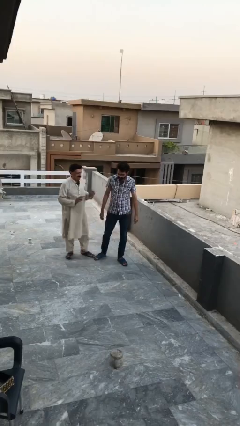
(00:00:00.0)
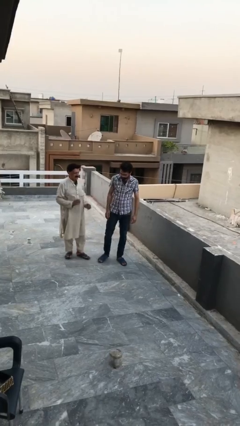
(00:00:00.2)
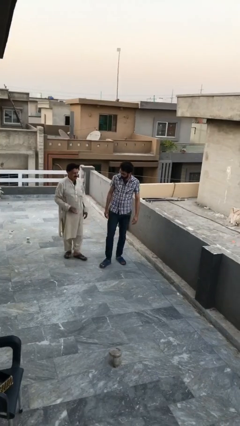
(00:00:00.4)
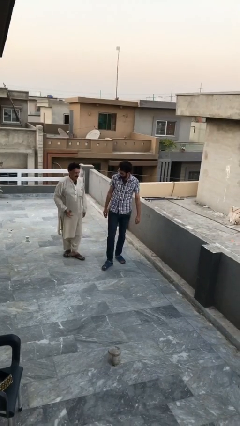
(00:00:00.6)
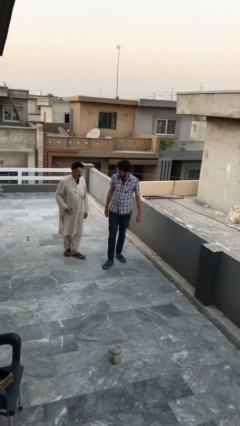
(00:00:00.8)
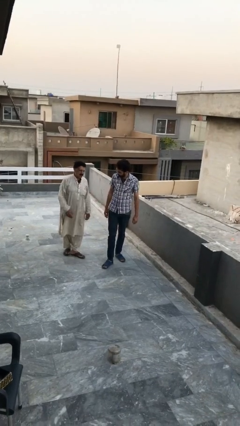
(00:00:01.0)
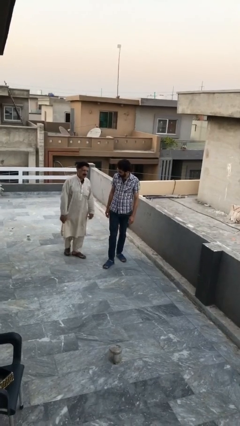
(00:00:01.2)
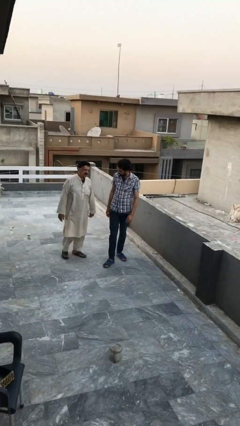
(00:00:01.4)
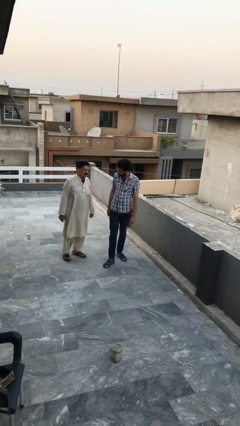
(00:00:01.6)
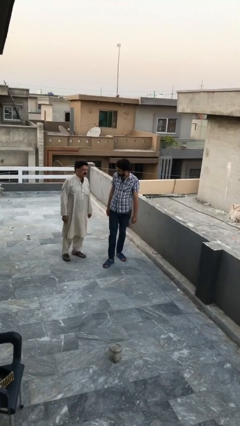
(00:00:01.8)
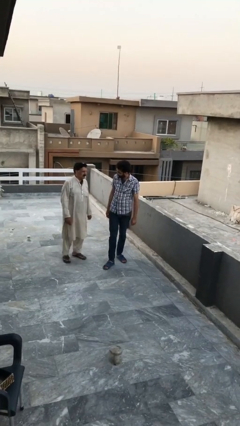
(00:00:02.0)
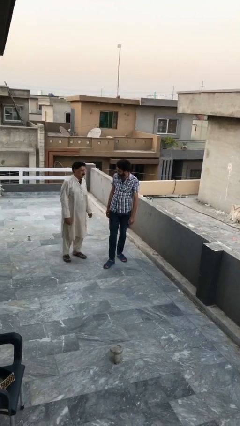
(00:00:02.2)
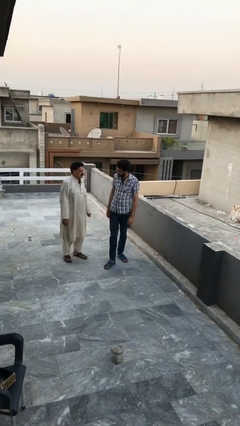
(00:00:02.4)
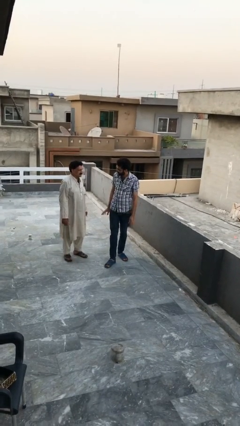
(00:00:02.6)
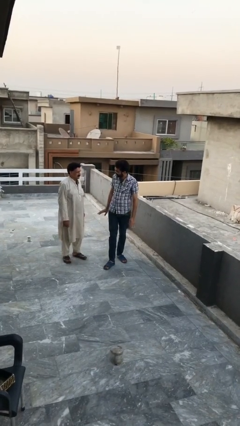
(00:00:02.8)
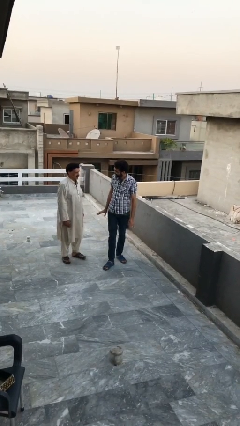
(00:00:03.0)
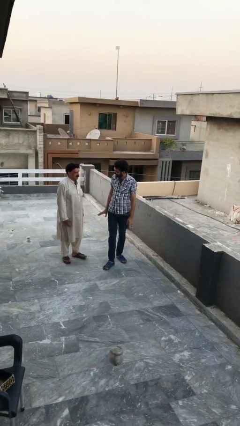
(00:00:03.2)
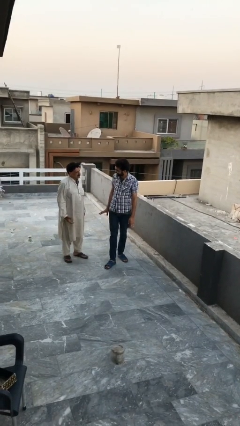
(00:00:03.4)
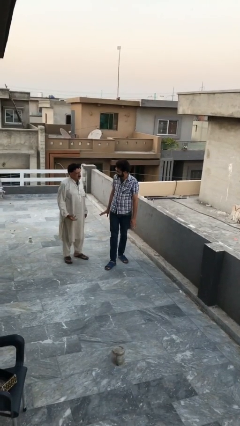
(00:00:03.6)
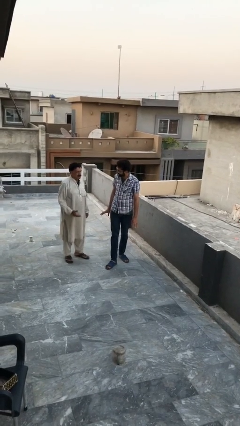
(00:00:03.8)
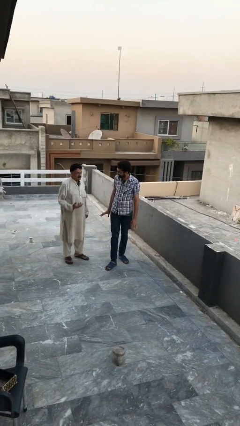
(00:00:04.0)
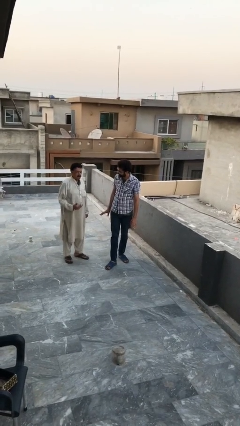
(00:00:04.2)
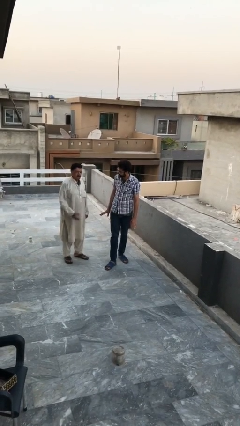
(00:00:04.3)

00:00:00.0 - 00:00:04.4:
person talks to person

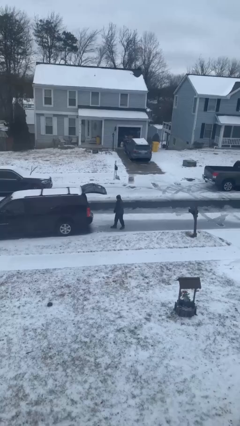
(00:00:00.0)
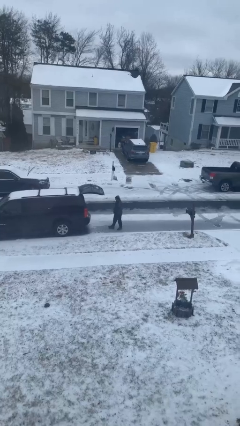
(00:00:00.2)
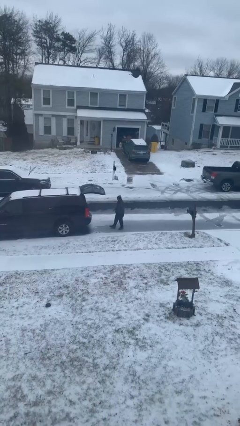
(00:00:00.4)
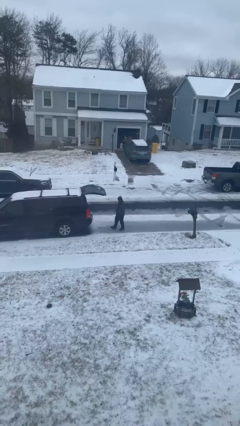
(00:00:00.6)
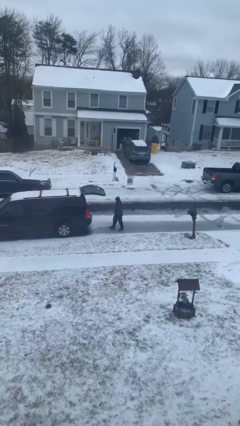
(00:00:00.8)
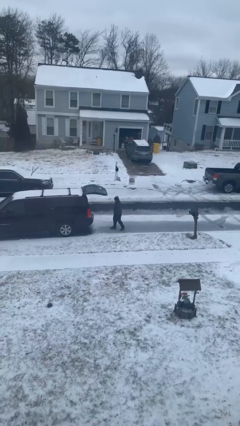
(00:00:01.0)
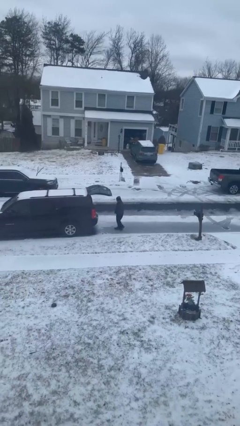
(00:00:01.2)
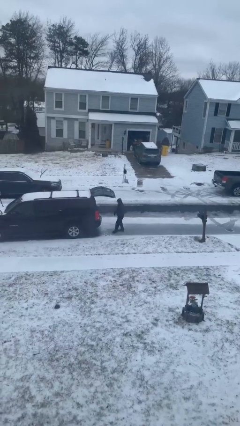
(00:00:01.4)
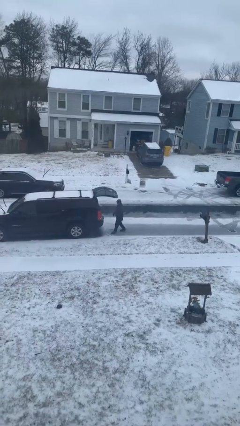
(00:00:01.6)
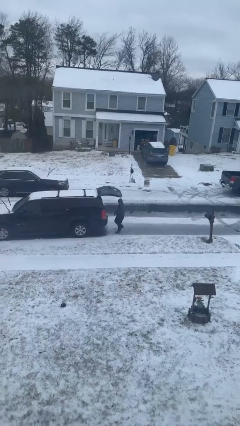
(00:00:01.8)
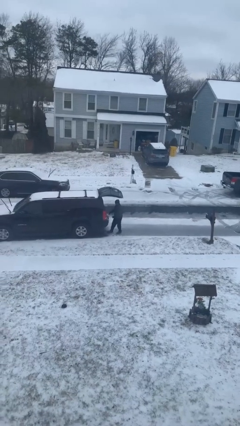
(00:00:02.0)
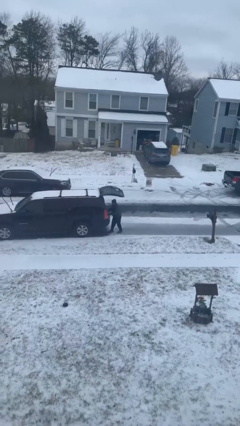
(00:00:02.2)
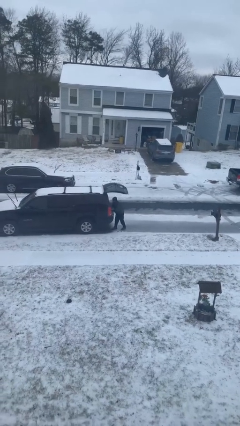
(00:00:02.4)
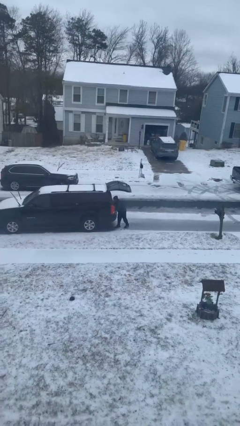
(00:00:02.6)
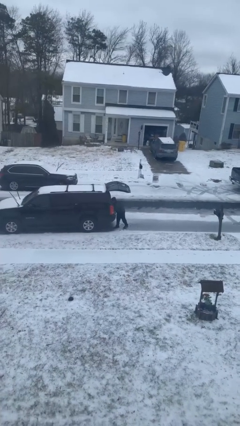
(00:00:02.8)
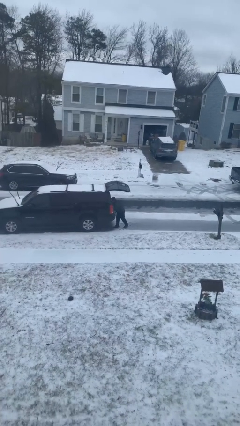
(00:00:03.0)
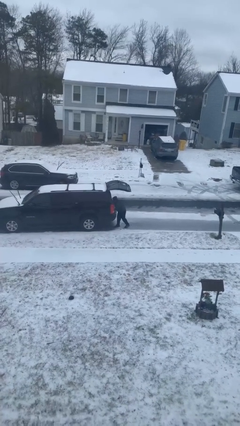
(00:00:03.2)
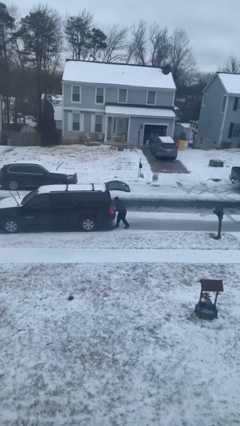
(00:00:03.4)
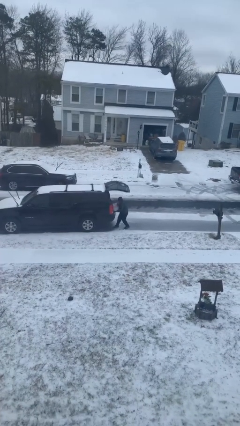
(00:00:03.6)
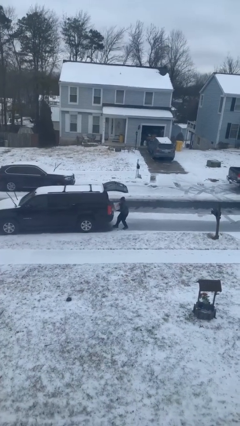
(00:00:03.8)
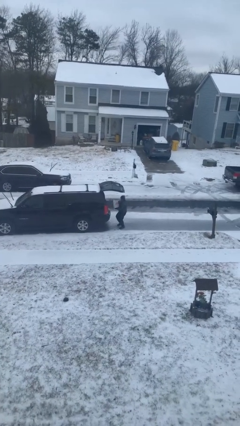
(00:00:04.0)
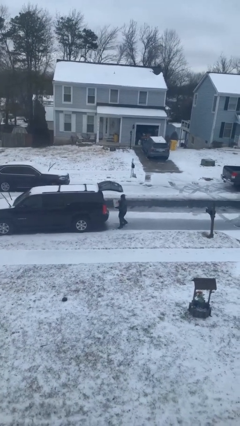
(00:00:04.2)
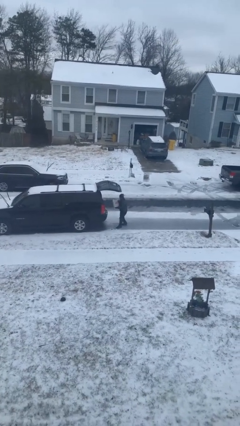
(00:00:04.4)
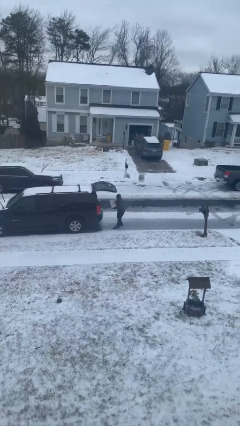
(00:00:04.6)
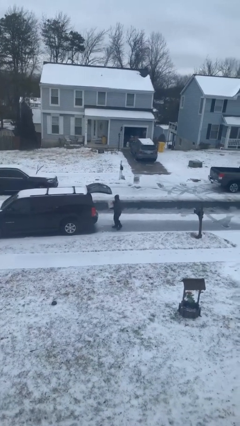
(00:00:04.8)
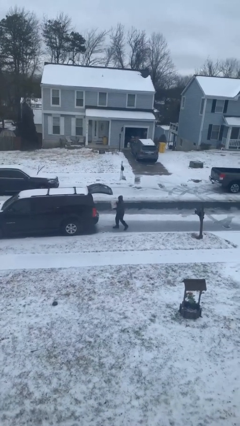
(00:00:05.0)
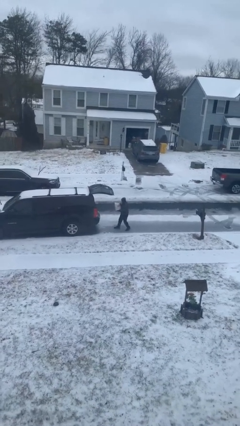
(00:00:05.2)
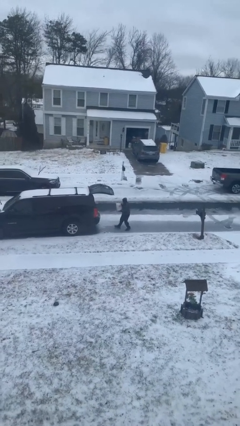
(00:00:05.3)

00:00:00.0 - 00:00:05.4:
person unloads car

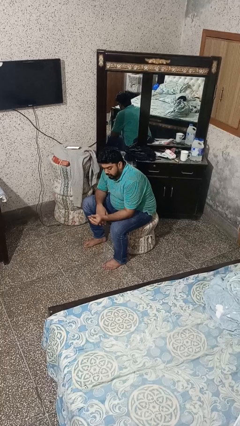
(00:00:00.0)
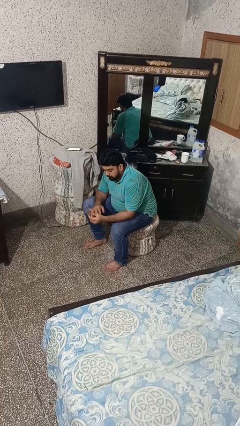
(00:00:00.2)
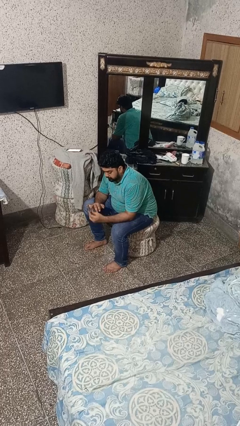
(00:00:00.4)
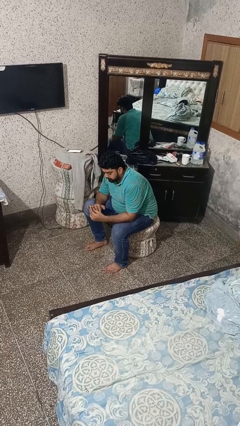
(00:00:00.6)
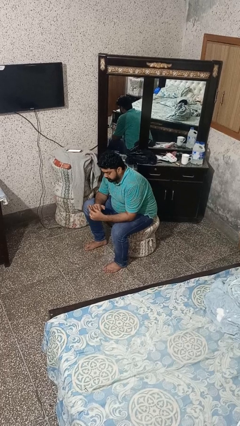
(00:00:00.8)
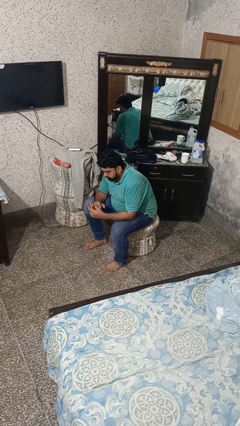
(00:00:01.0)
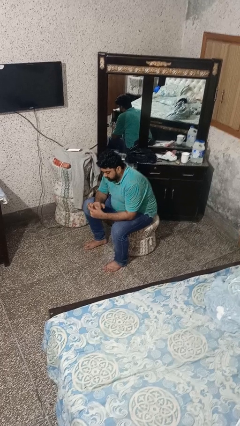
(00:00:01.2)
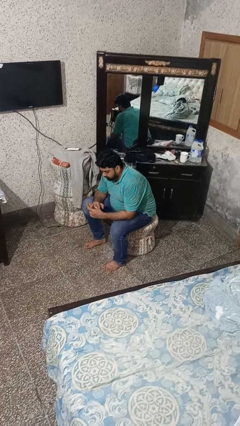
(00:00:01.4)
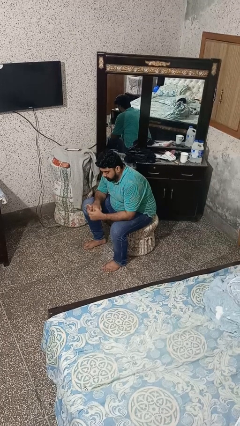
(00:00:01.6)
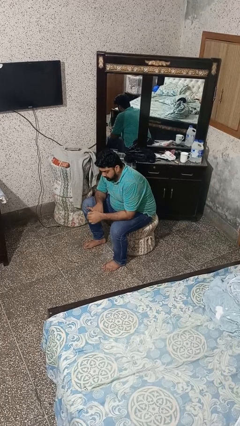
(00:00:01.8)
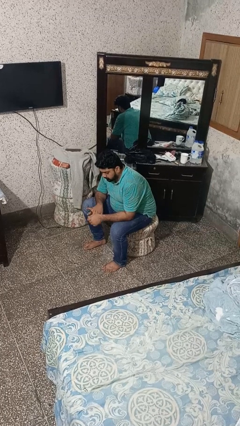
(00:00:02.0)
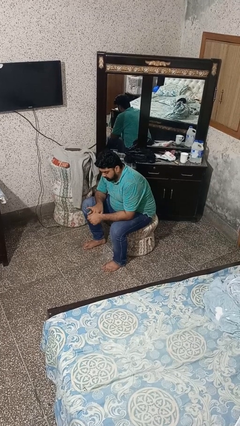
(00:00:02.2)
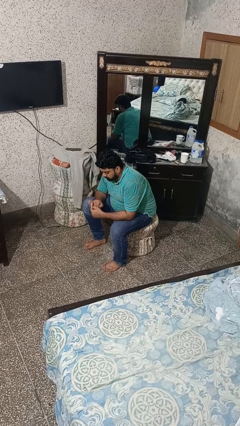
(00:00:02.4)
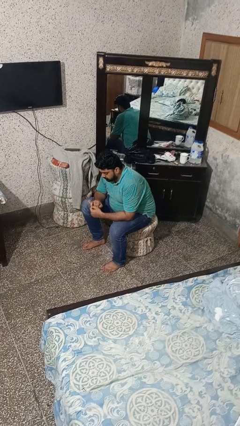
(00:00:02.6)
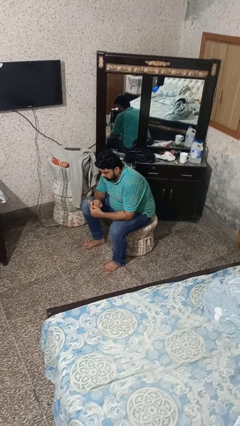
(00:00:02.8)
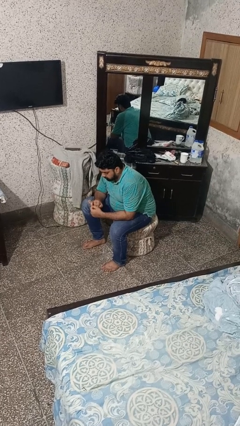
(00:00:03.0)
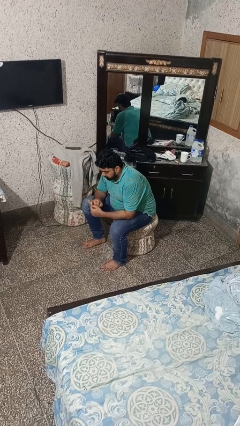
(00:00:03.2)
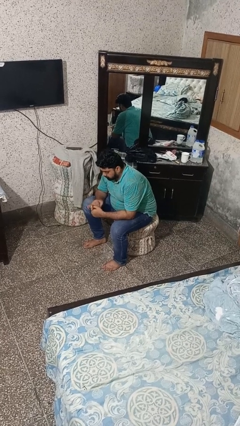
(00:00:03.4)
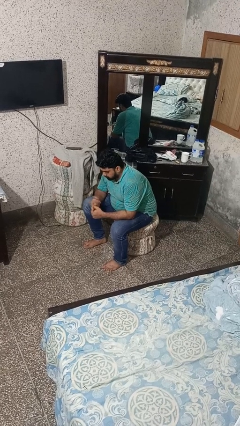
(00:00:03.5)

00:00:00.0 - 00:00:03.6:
person puts on ring

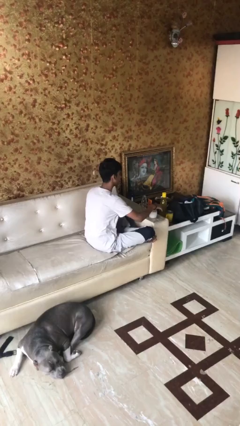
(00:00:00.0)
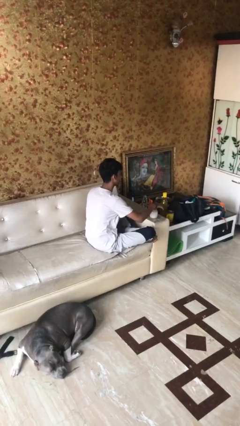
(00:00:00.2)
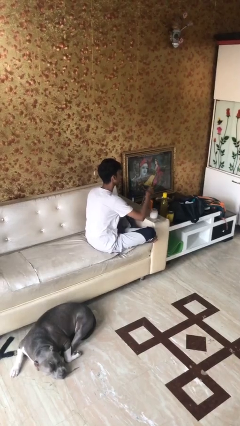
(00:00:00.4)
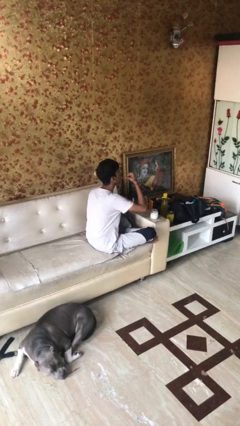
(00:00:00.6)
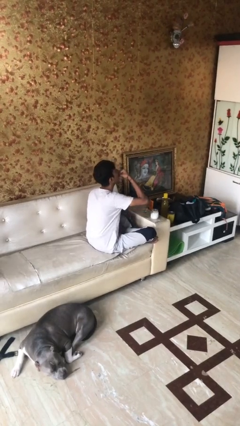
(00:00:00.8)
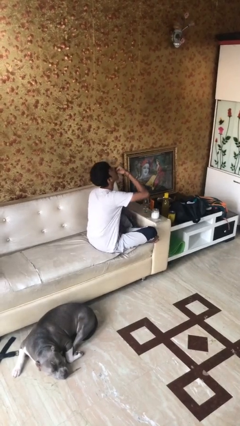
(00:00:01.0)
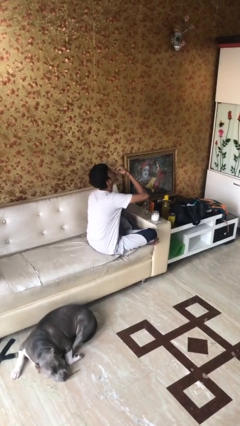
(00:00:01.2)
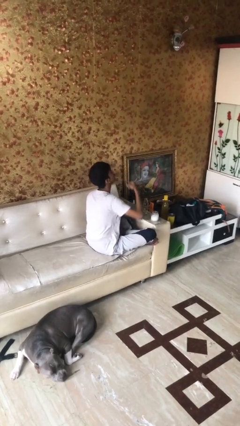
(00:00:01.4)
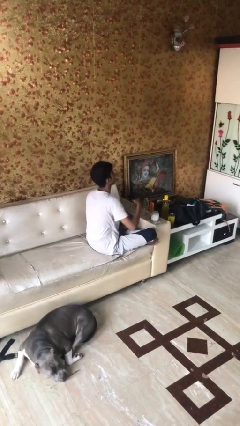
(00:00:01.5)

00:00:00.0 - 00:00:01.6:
person takes medicine pills

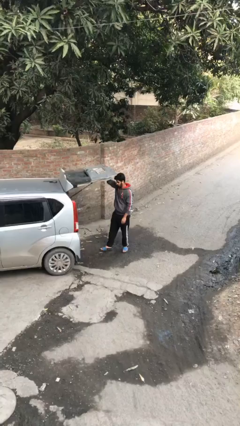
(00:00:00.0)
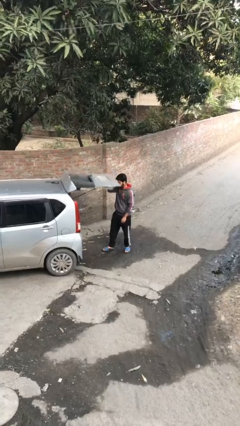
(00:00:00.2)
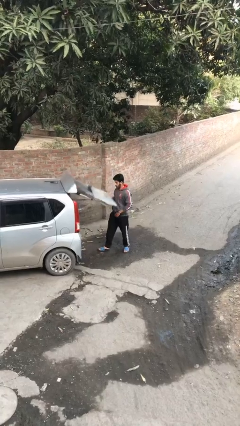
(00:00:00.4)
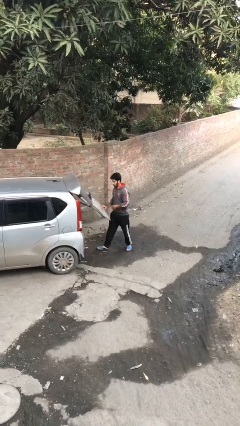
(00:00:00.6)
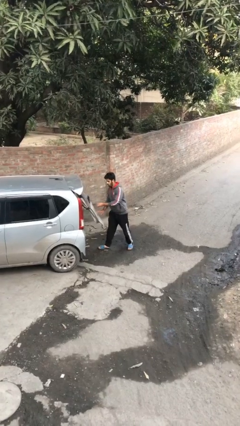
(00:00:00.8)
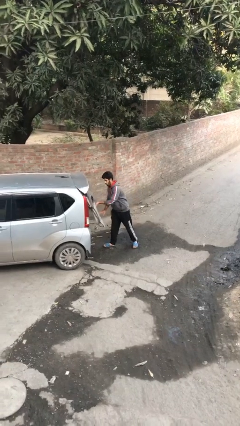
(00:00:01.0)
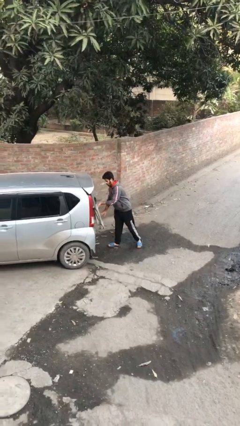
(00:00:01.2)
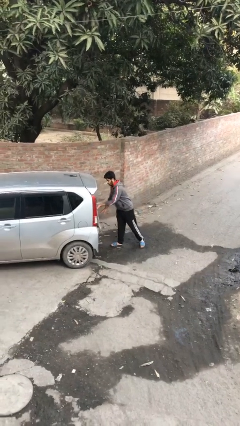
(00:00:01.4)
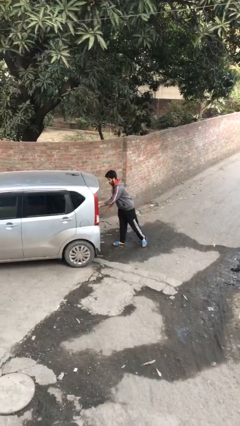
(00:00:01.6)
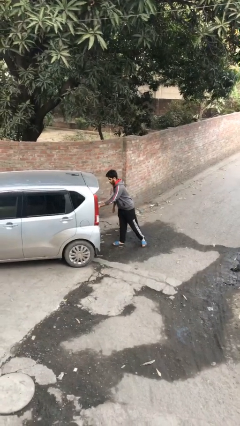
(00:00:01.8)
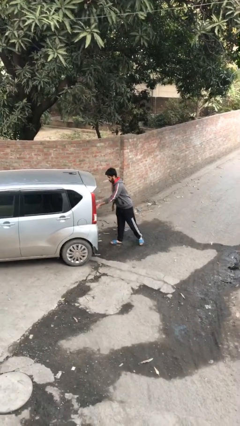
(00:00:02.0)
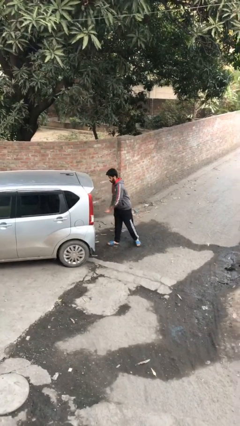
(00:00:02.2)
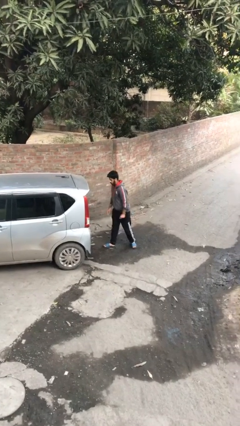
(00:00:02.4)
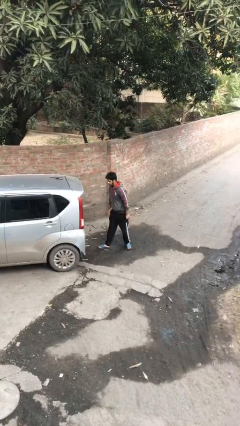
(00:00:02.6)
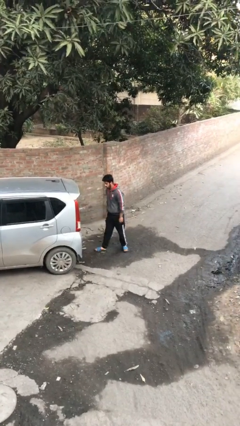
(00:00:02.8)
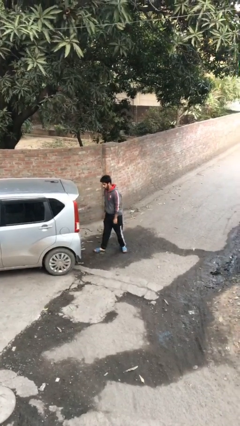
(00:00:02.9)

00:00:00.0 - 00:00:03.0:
person closes car trunk
